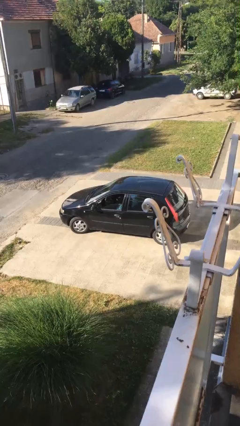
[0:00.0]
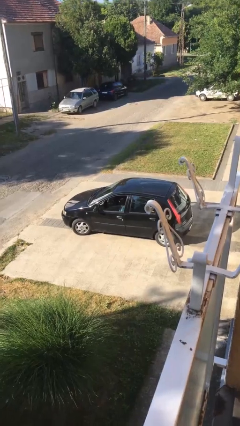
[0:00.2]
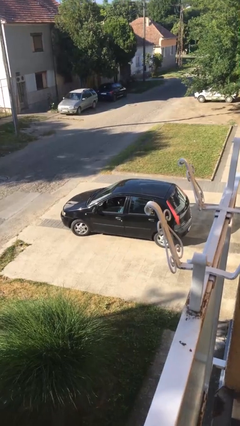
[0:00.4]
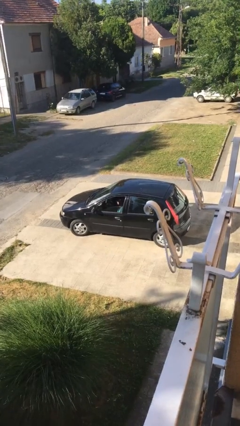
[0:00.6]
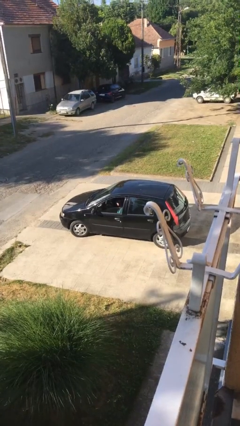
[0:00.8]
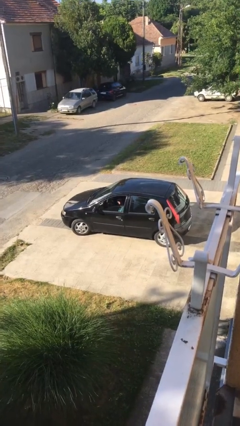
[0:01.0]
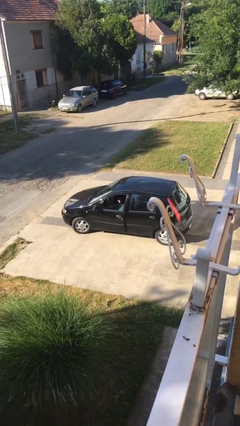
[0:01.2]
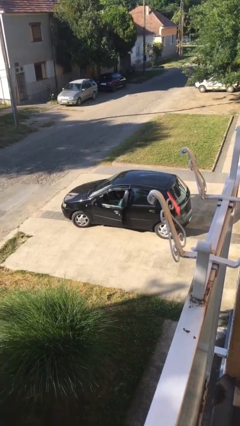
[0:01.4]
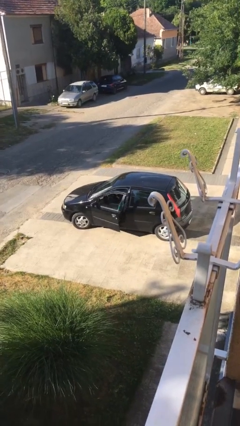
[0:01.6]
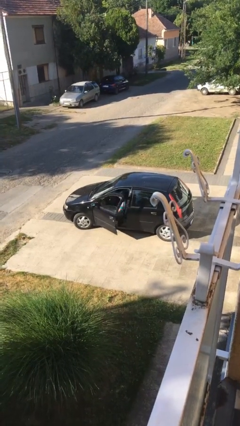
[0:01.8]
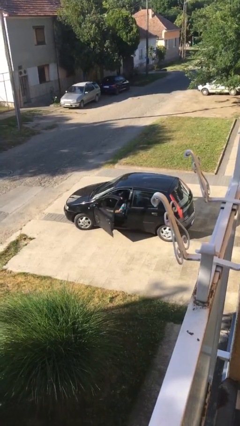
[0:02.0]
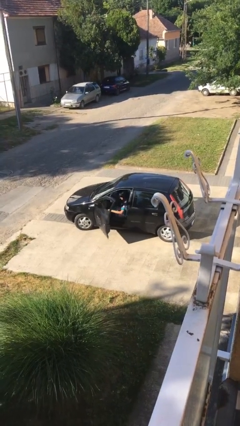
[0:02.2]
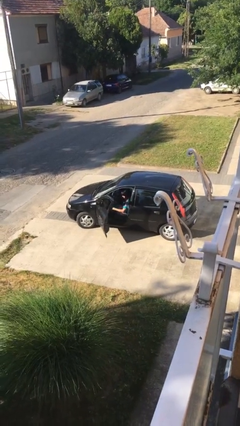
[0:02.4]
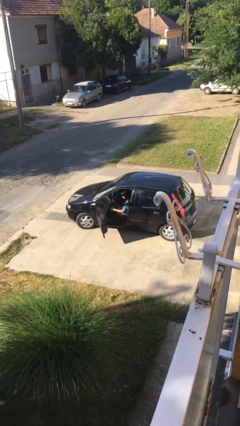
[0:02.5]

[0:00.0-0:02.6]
person opens car door

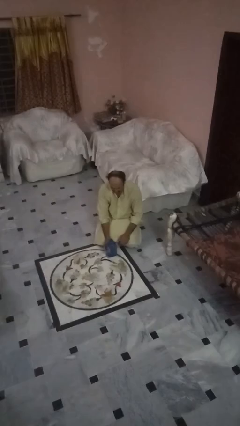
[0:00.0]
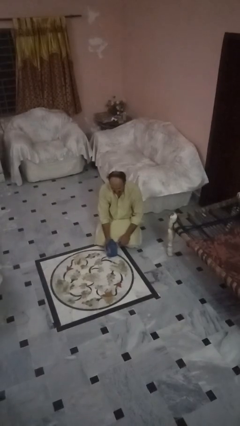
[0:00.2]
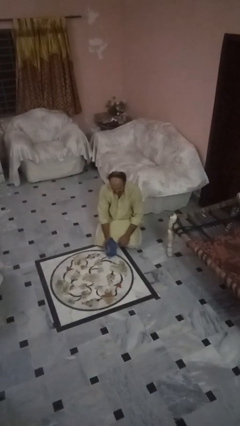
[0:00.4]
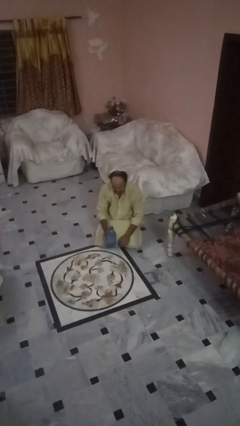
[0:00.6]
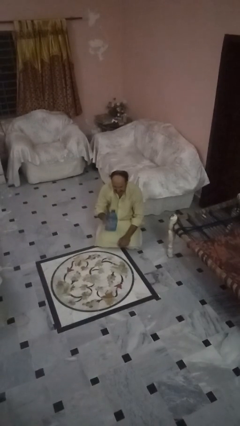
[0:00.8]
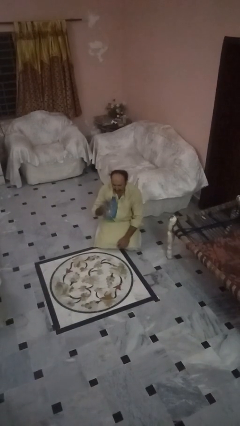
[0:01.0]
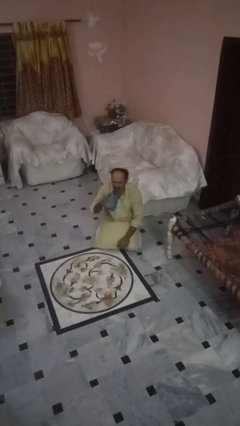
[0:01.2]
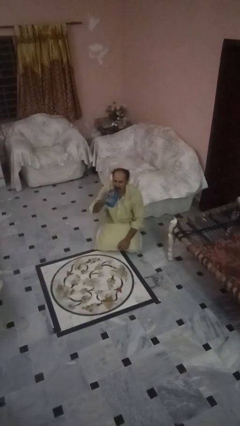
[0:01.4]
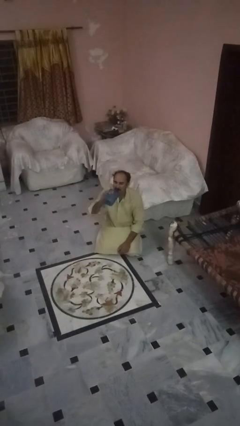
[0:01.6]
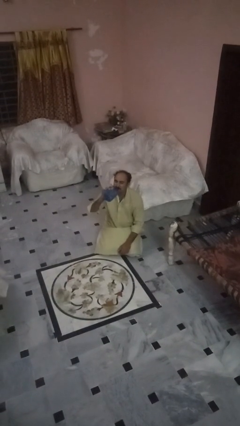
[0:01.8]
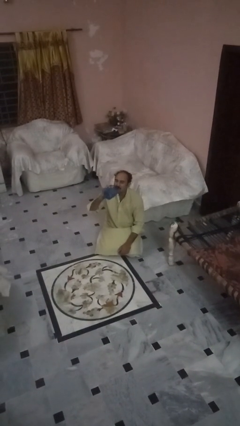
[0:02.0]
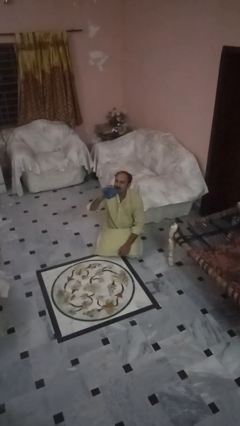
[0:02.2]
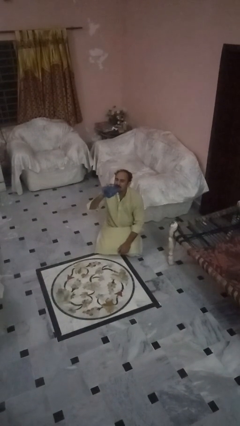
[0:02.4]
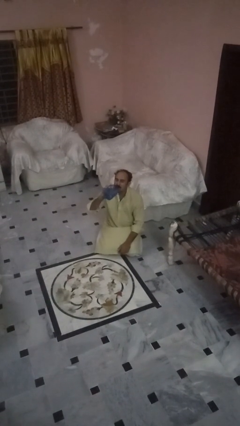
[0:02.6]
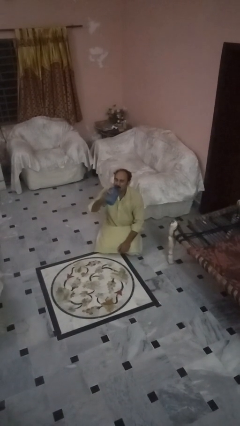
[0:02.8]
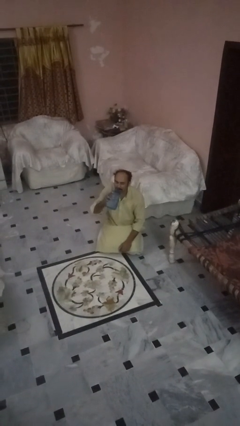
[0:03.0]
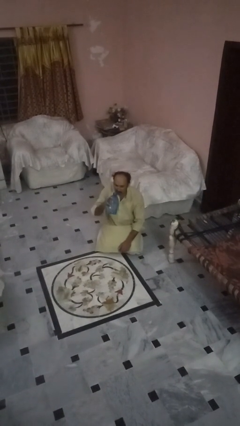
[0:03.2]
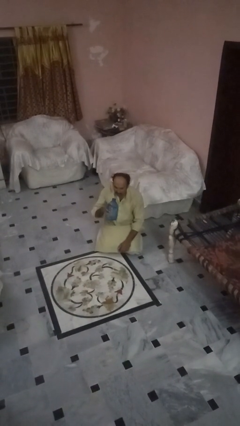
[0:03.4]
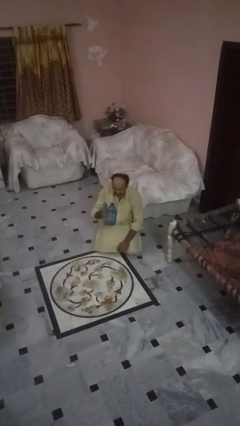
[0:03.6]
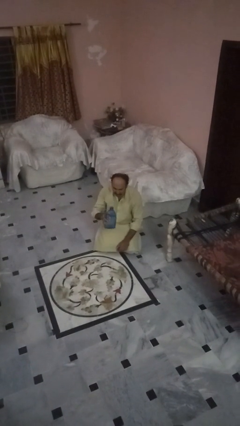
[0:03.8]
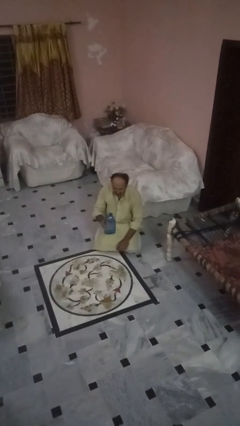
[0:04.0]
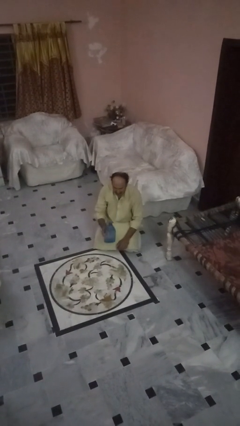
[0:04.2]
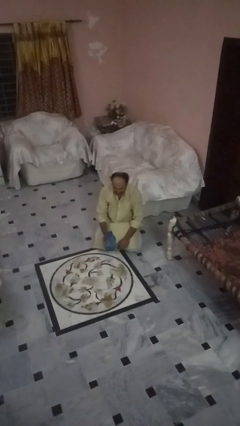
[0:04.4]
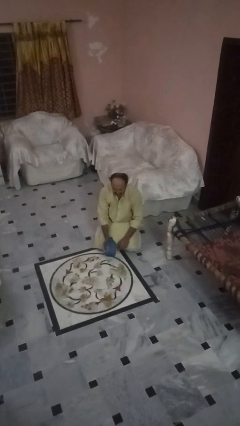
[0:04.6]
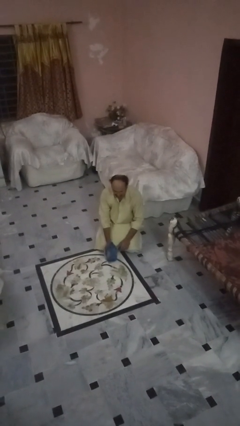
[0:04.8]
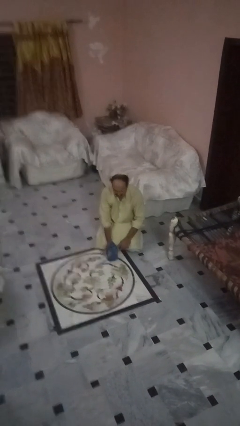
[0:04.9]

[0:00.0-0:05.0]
person drinks from bottle

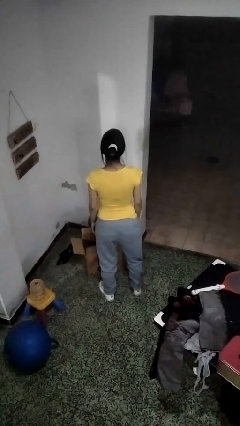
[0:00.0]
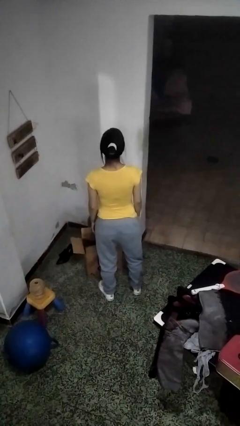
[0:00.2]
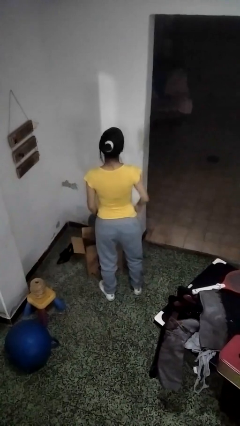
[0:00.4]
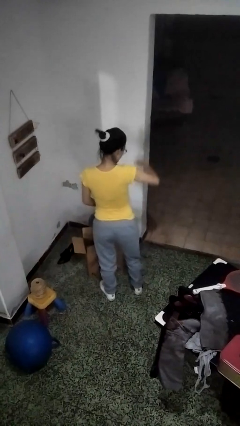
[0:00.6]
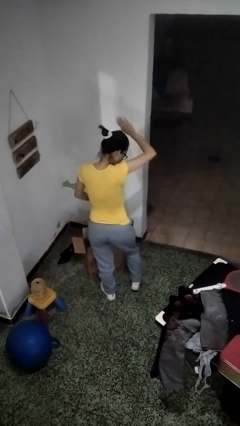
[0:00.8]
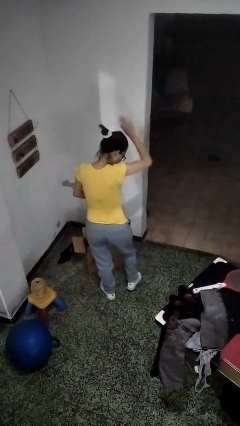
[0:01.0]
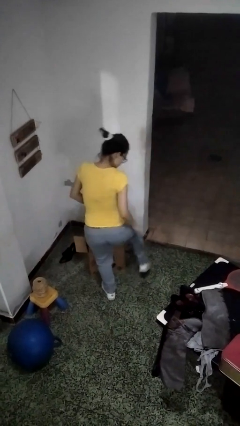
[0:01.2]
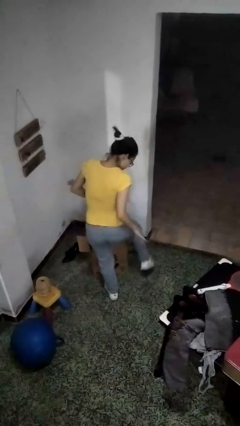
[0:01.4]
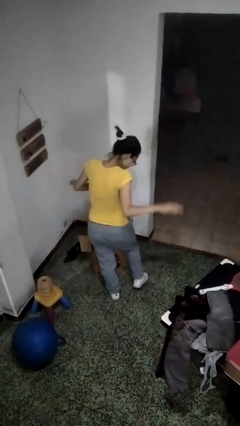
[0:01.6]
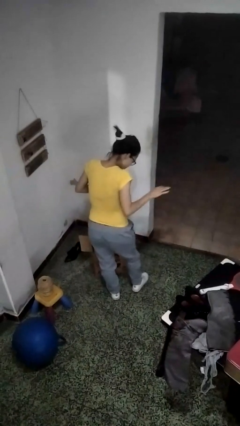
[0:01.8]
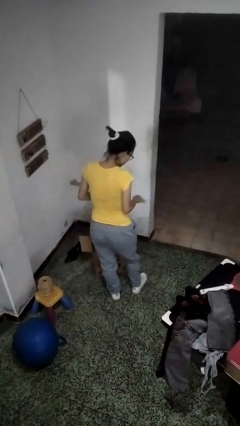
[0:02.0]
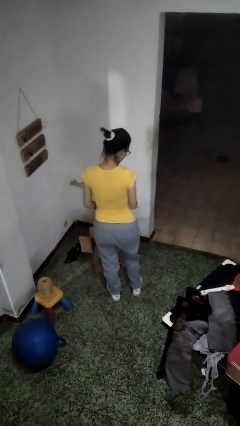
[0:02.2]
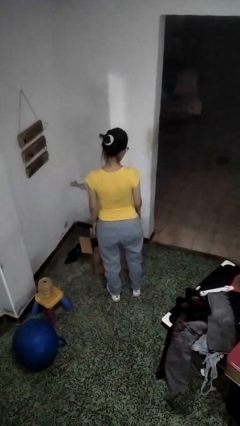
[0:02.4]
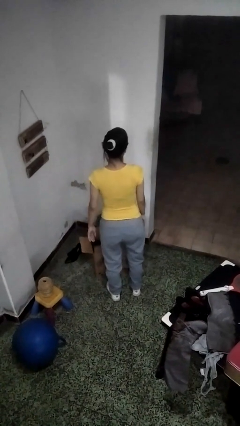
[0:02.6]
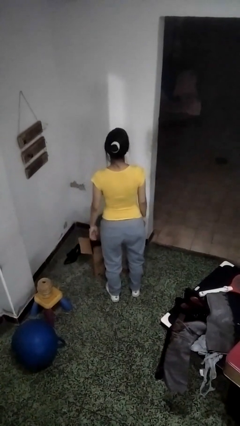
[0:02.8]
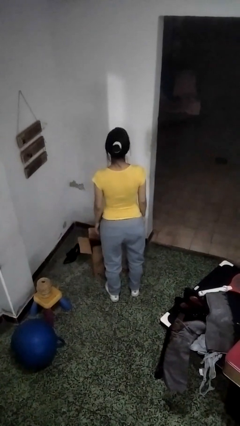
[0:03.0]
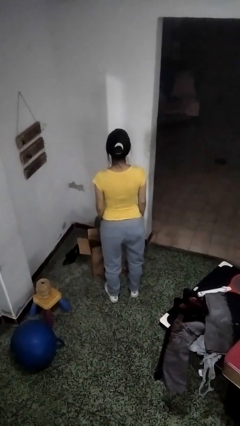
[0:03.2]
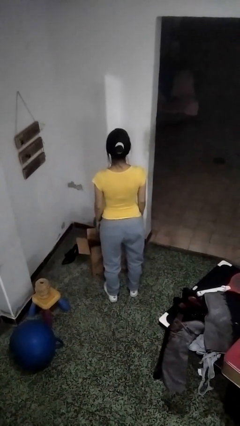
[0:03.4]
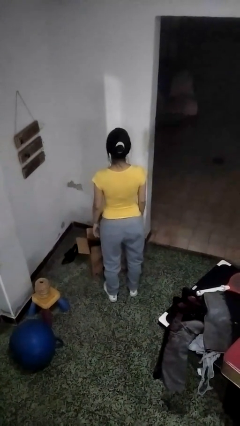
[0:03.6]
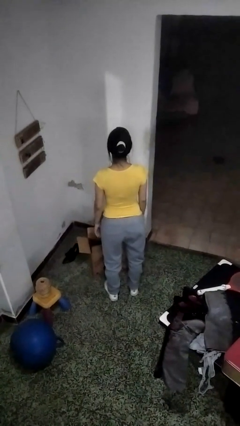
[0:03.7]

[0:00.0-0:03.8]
person swats bug

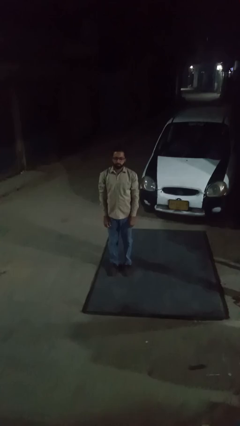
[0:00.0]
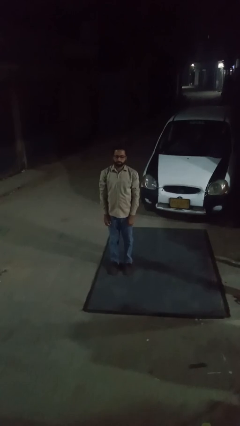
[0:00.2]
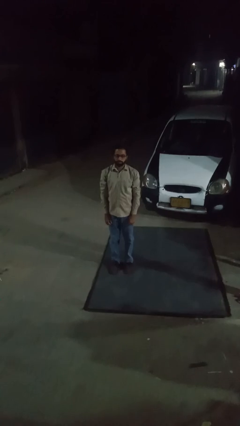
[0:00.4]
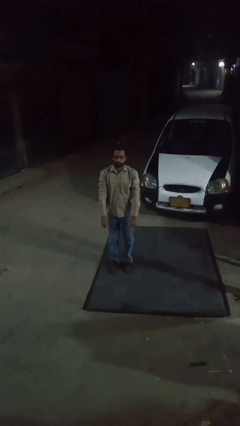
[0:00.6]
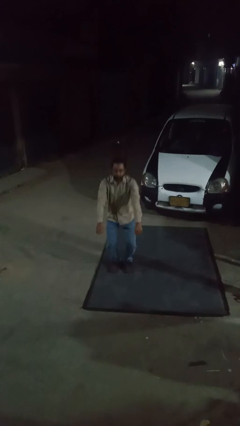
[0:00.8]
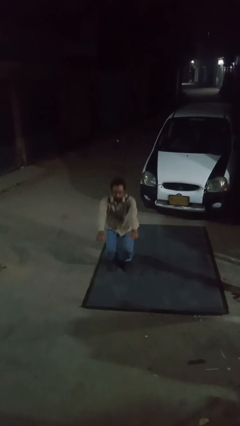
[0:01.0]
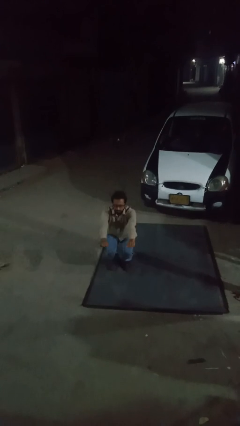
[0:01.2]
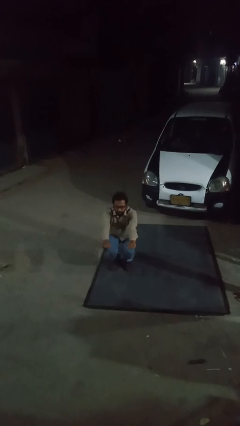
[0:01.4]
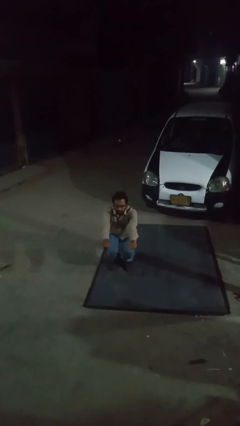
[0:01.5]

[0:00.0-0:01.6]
person squats

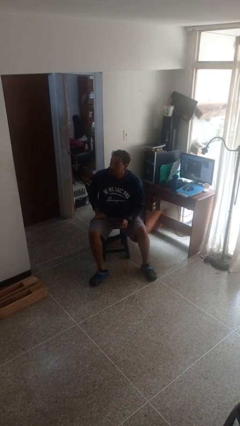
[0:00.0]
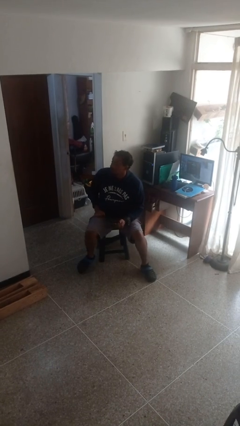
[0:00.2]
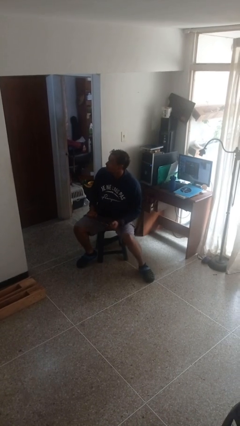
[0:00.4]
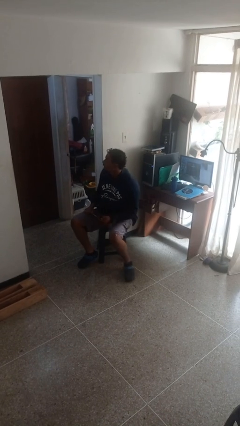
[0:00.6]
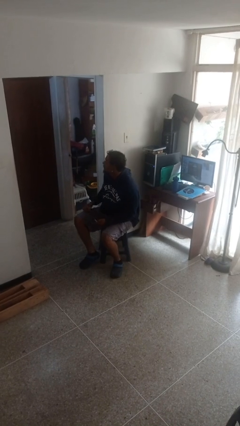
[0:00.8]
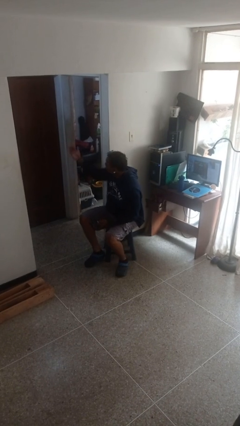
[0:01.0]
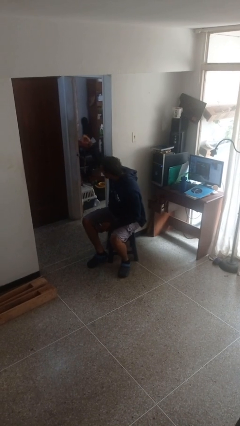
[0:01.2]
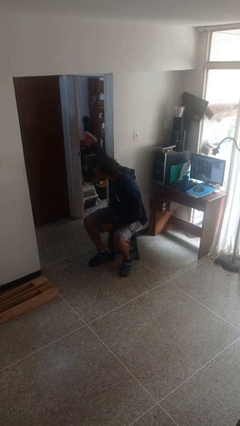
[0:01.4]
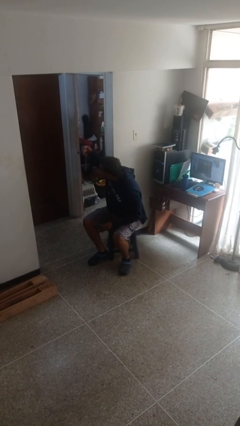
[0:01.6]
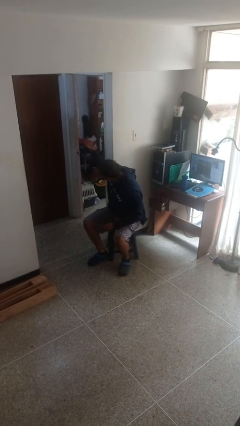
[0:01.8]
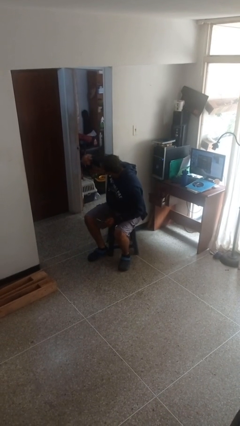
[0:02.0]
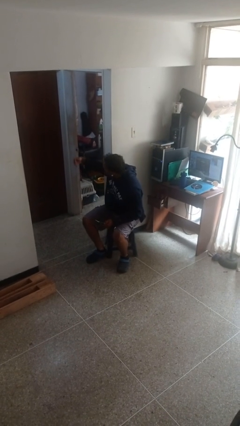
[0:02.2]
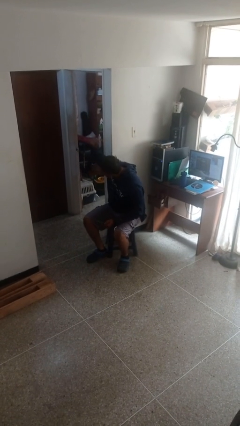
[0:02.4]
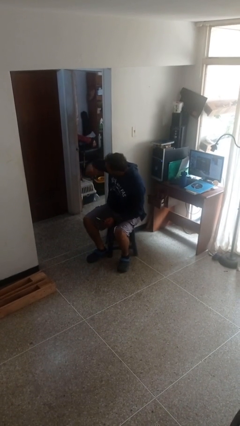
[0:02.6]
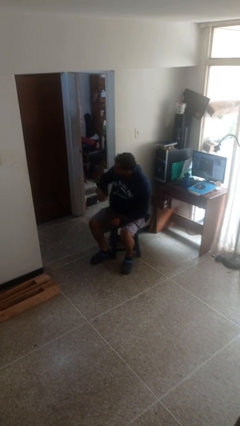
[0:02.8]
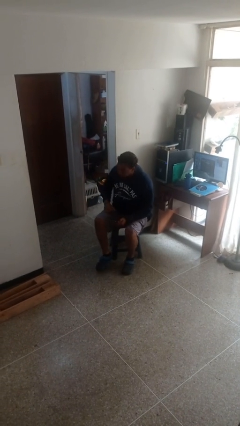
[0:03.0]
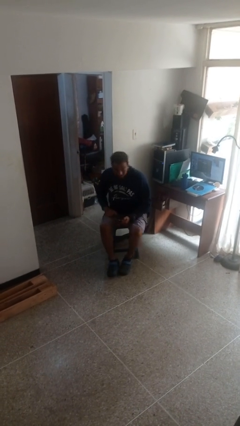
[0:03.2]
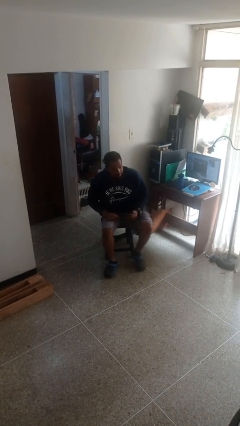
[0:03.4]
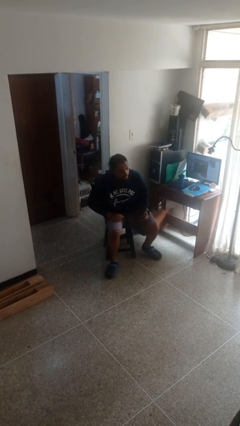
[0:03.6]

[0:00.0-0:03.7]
person gestures come here

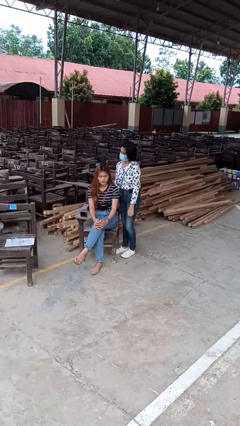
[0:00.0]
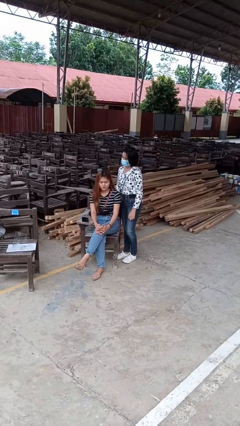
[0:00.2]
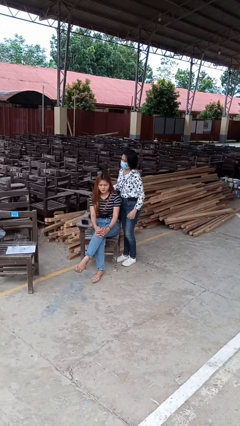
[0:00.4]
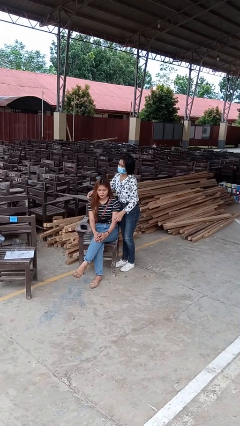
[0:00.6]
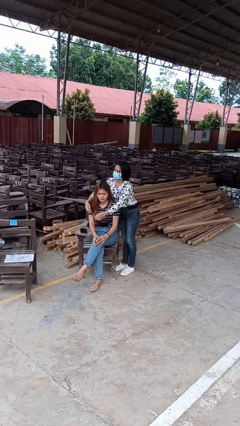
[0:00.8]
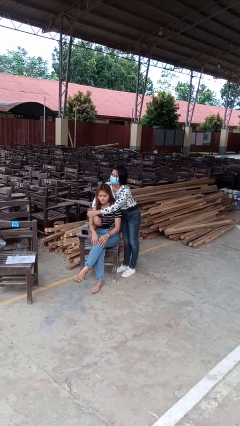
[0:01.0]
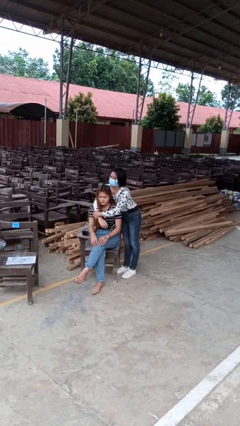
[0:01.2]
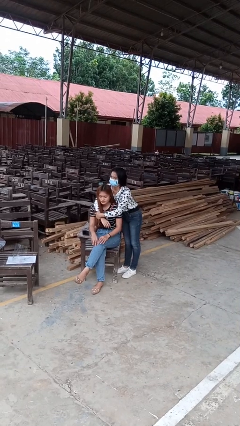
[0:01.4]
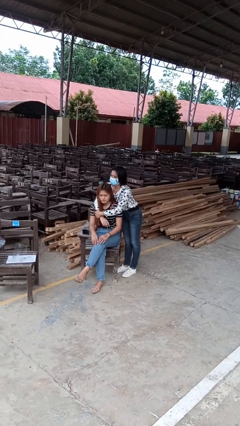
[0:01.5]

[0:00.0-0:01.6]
person hugs person from behind
